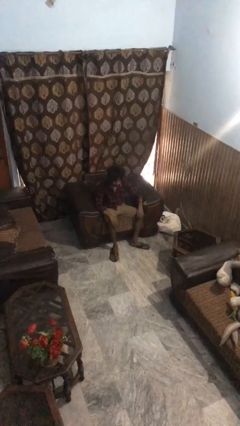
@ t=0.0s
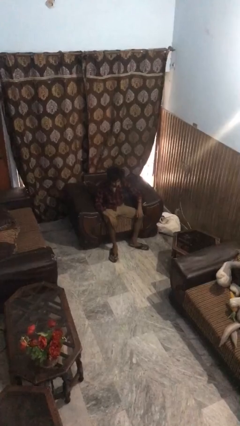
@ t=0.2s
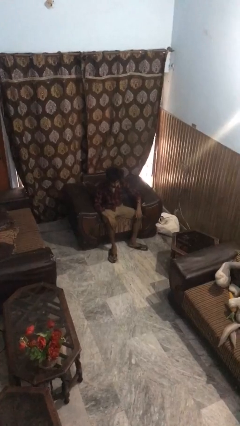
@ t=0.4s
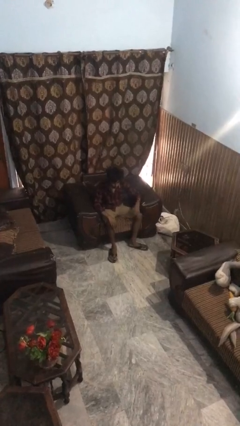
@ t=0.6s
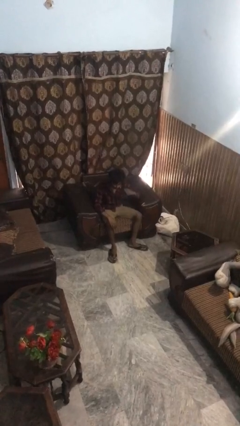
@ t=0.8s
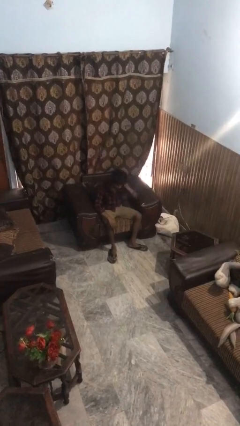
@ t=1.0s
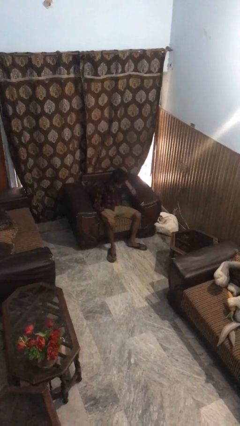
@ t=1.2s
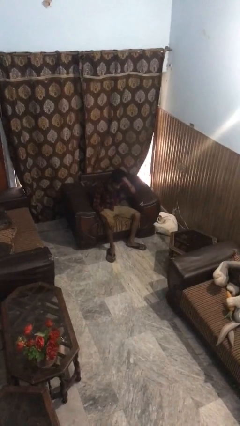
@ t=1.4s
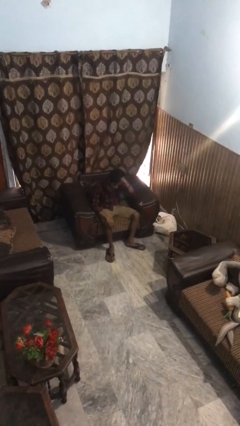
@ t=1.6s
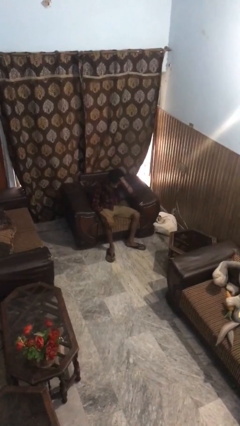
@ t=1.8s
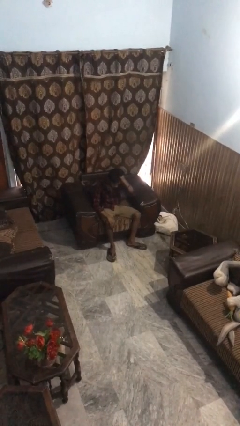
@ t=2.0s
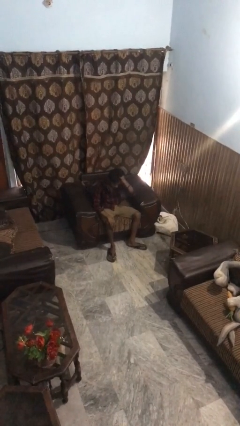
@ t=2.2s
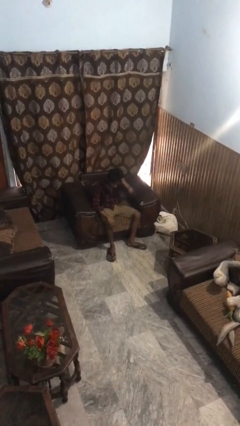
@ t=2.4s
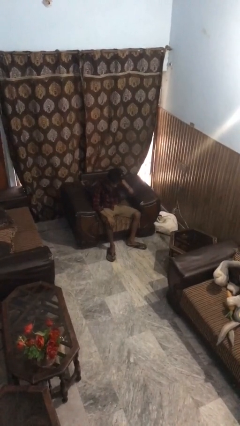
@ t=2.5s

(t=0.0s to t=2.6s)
person strokes hair

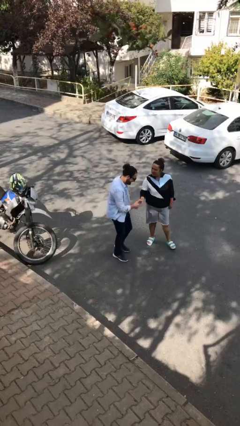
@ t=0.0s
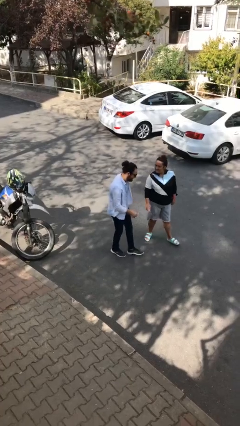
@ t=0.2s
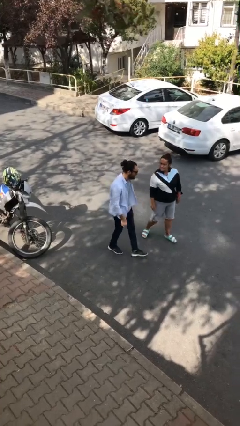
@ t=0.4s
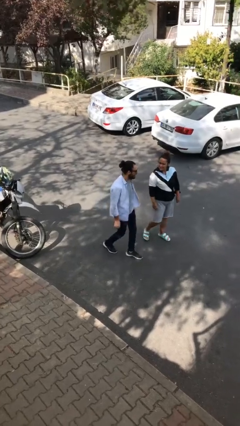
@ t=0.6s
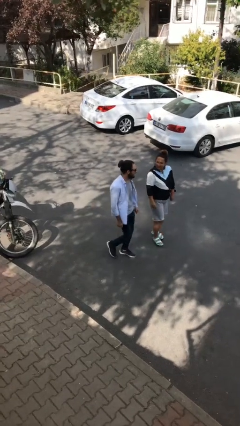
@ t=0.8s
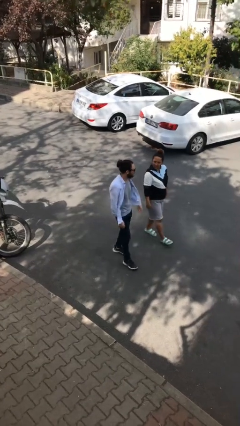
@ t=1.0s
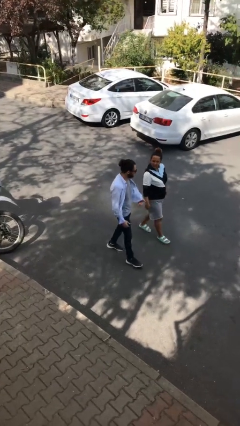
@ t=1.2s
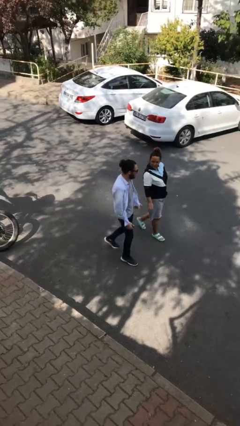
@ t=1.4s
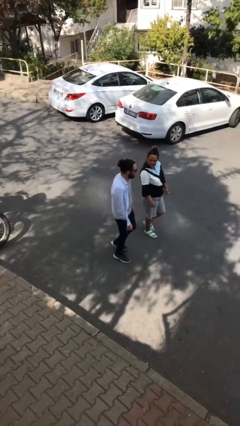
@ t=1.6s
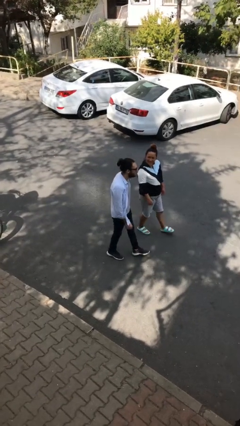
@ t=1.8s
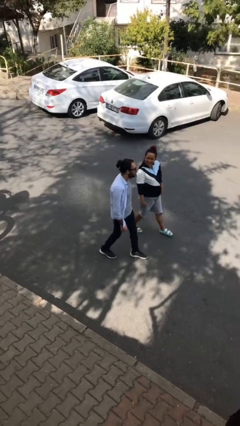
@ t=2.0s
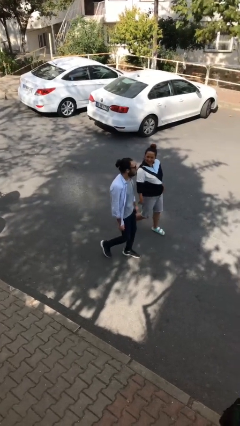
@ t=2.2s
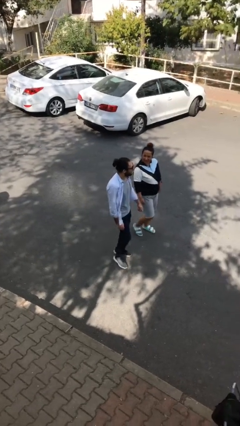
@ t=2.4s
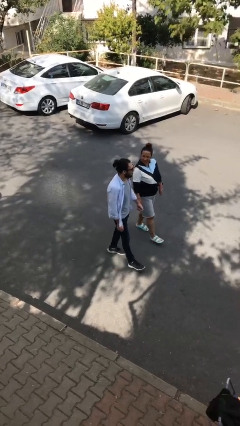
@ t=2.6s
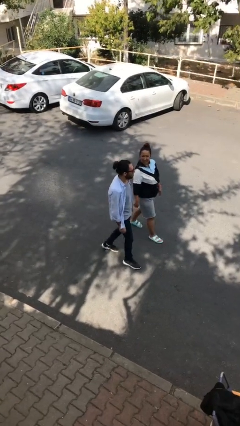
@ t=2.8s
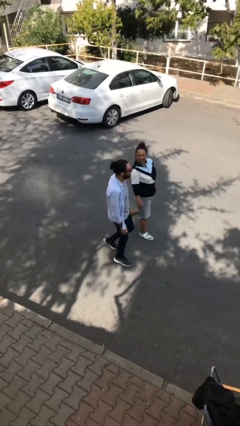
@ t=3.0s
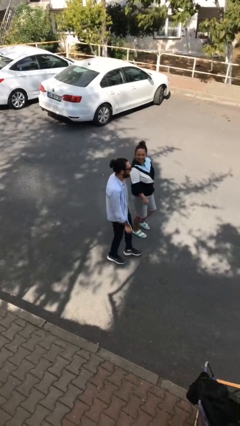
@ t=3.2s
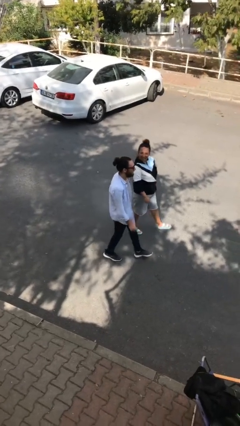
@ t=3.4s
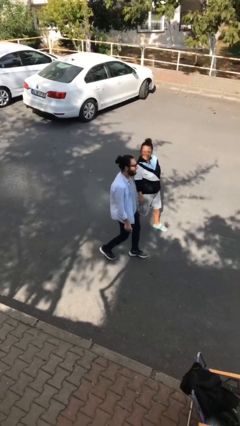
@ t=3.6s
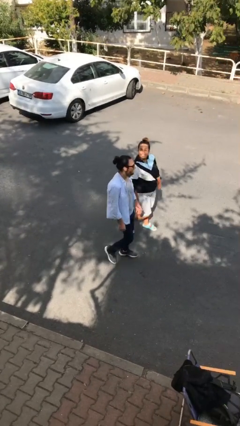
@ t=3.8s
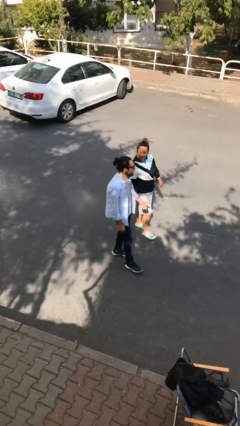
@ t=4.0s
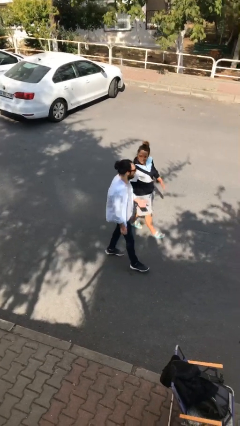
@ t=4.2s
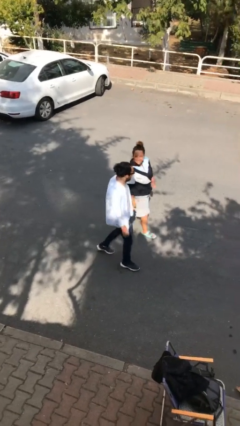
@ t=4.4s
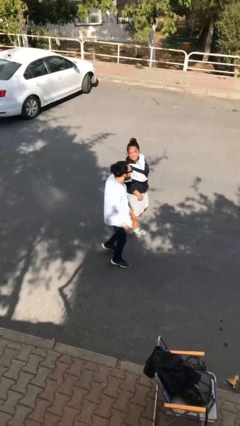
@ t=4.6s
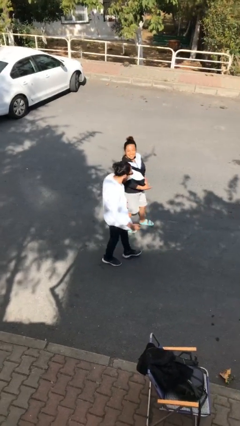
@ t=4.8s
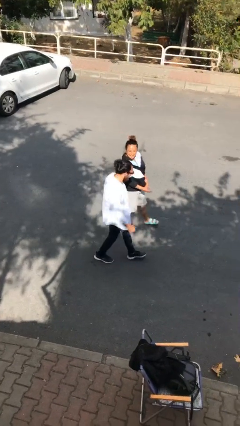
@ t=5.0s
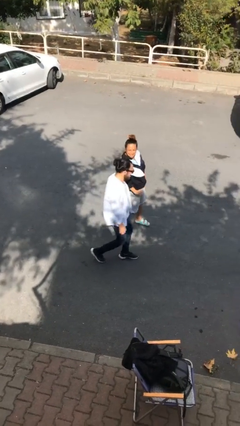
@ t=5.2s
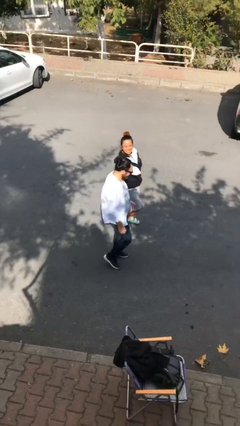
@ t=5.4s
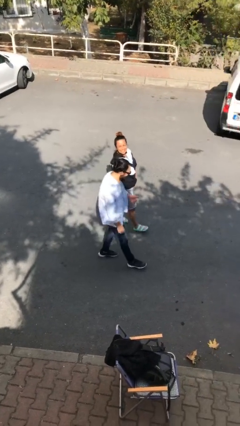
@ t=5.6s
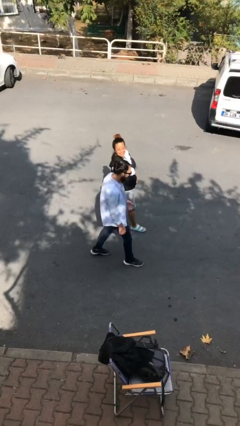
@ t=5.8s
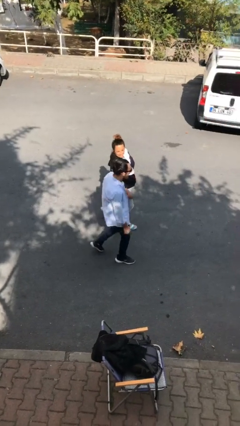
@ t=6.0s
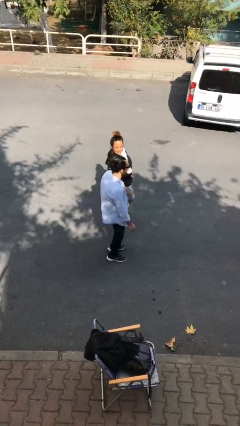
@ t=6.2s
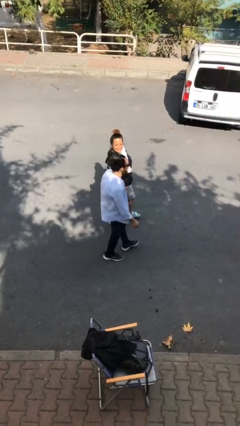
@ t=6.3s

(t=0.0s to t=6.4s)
person talks to person

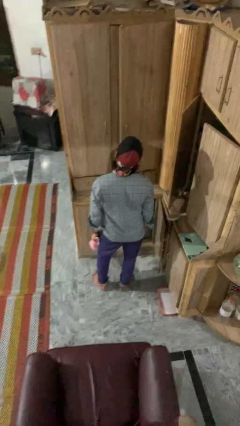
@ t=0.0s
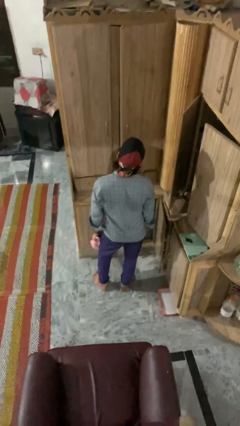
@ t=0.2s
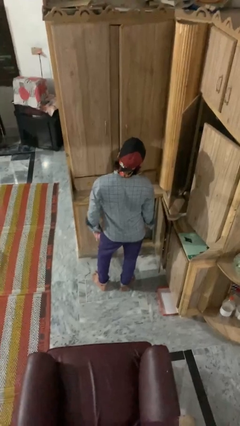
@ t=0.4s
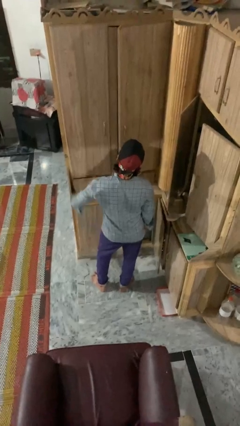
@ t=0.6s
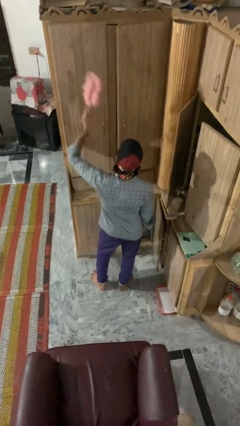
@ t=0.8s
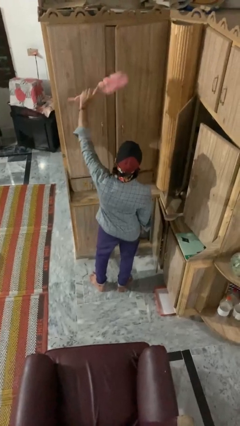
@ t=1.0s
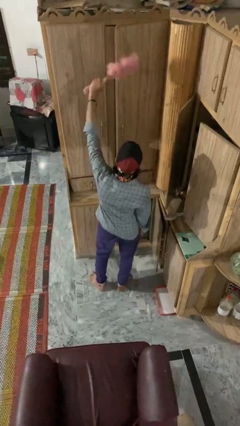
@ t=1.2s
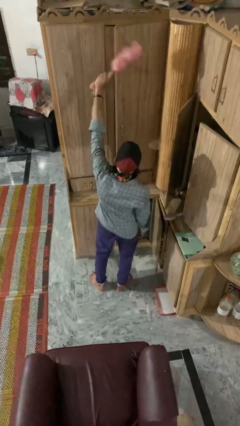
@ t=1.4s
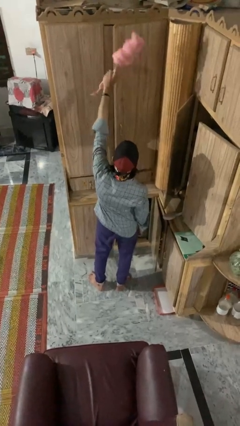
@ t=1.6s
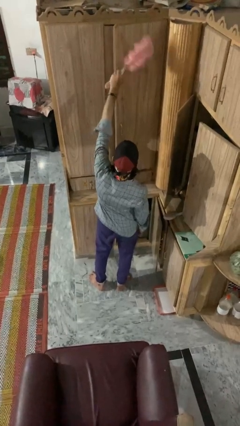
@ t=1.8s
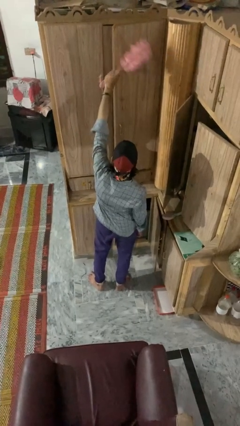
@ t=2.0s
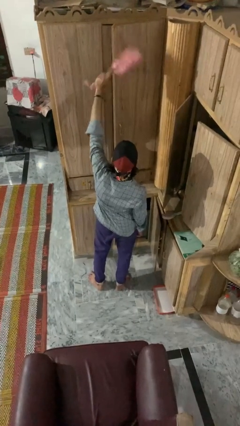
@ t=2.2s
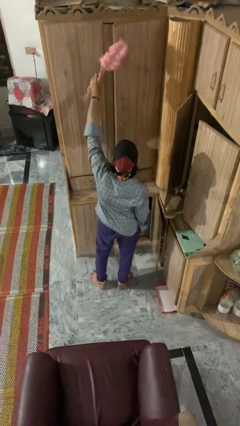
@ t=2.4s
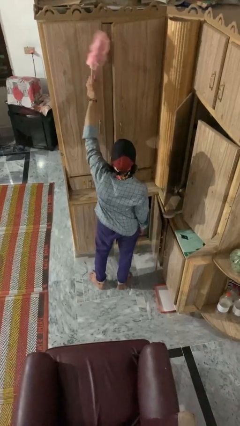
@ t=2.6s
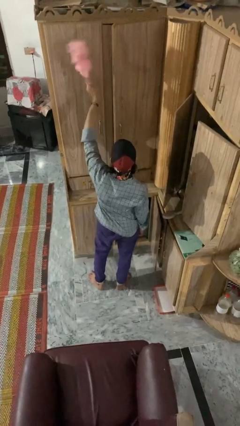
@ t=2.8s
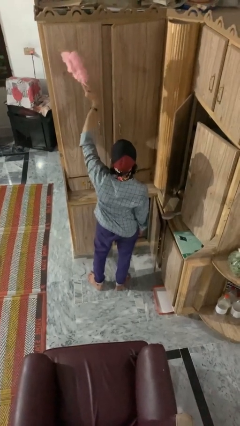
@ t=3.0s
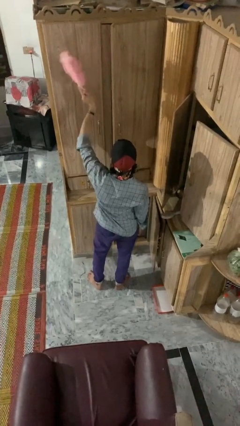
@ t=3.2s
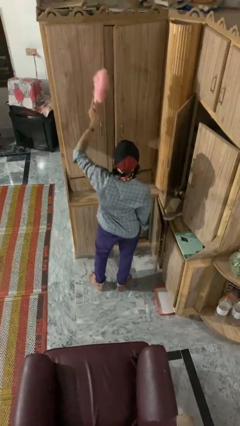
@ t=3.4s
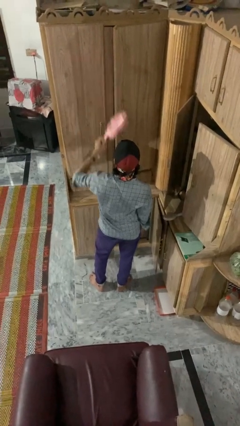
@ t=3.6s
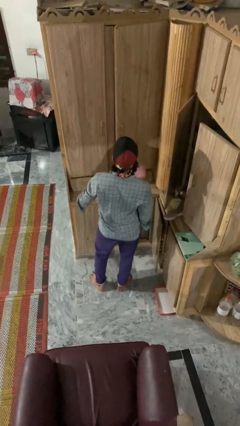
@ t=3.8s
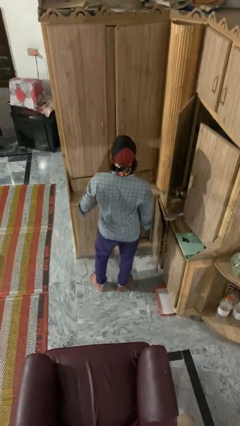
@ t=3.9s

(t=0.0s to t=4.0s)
person dusts furniture

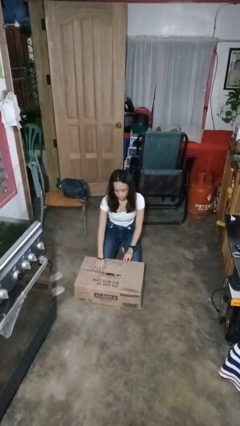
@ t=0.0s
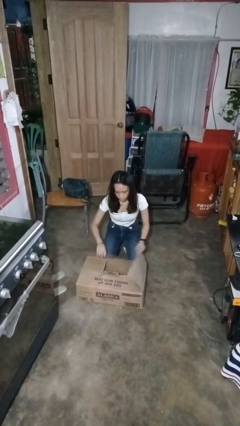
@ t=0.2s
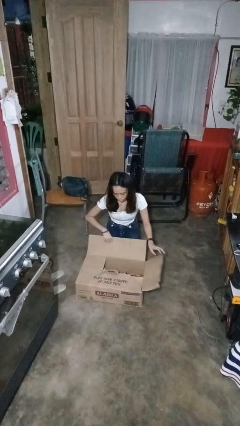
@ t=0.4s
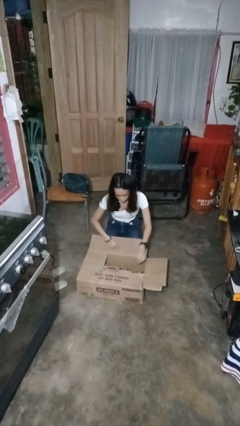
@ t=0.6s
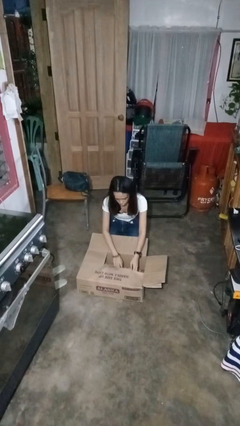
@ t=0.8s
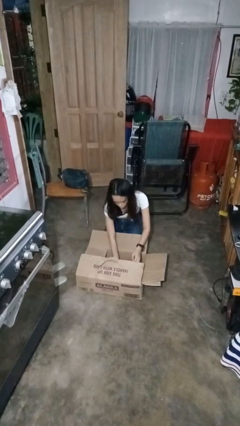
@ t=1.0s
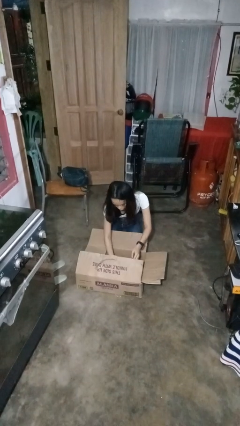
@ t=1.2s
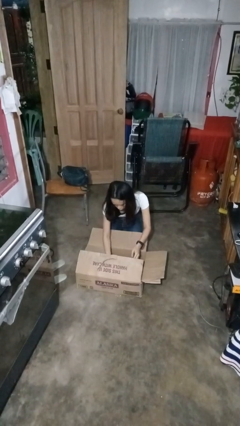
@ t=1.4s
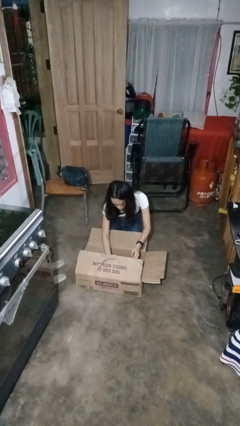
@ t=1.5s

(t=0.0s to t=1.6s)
person searches in box

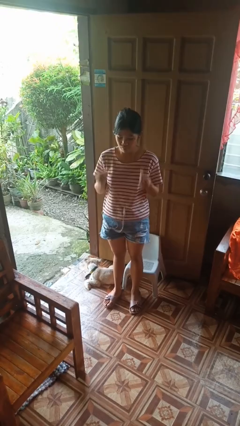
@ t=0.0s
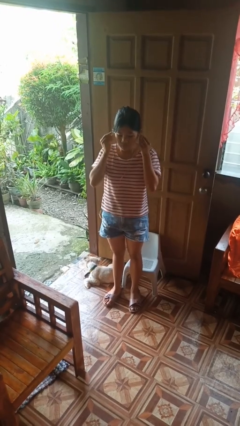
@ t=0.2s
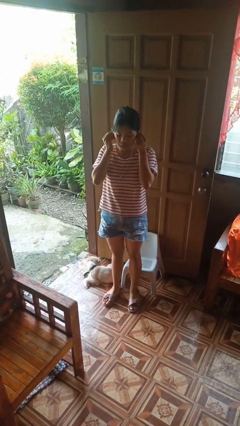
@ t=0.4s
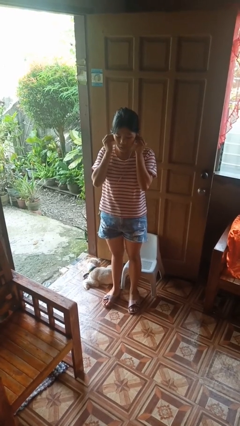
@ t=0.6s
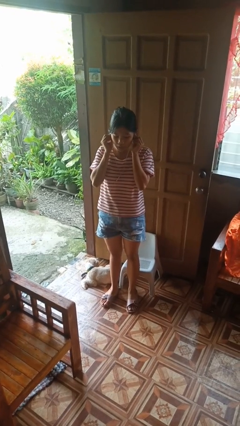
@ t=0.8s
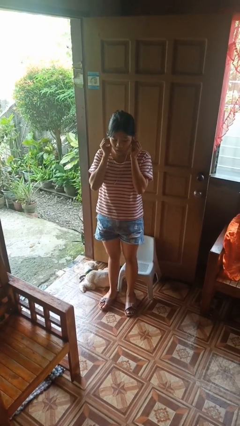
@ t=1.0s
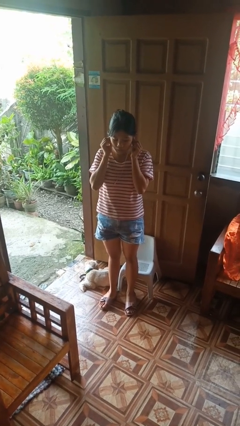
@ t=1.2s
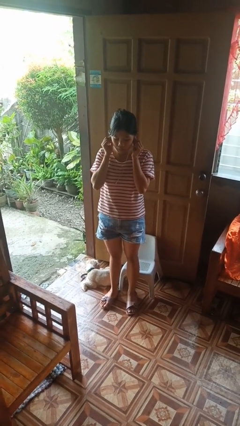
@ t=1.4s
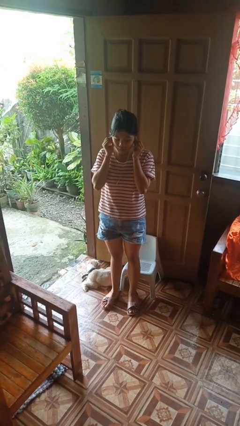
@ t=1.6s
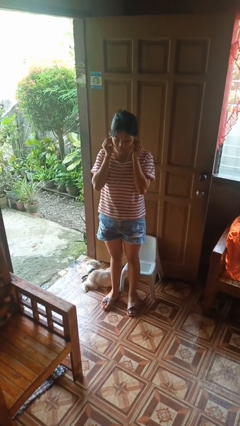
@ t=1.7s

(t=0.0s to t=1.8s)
person puts on headphones

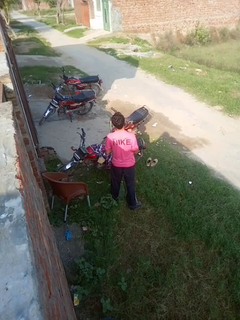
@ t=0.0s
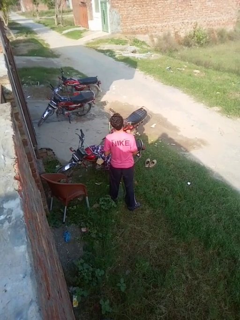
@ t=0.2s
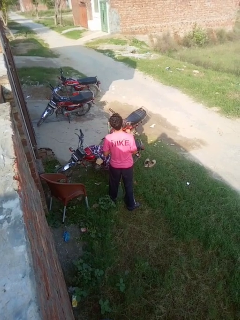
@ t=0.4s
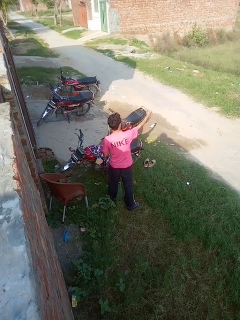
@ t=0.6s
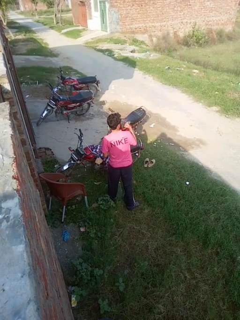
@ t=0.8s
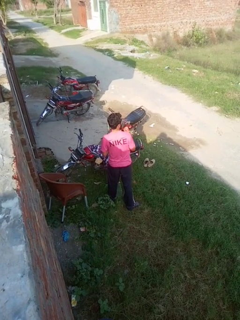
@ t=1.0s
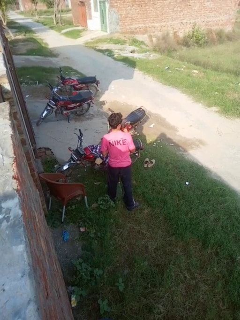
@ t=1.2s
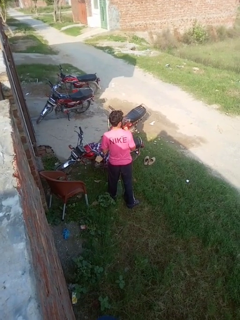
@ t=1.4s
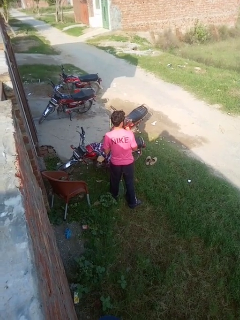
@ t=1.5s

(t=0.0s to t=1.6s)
person punches
